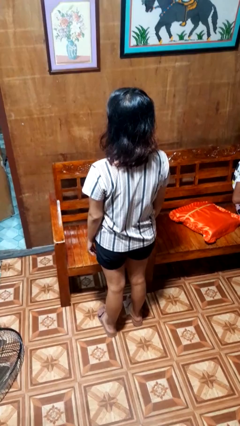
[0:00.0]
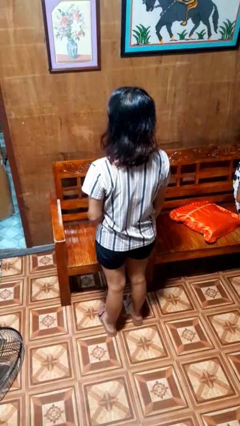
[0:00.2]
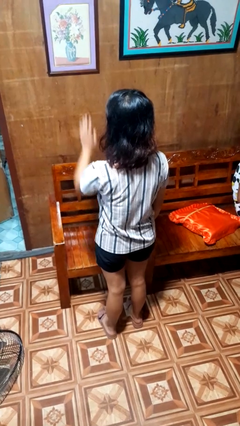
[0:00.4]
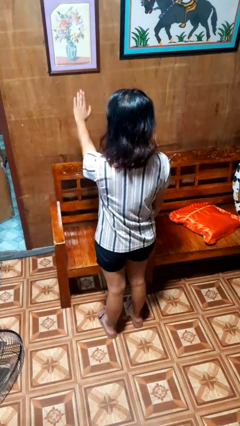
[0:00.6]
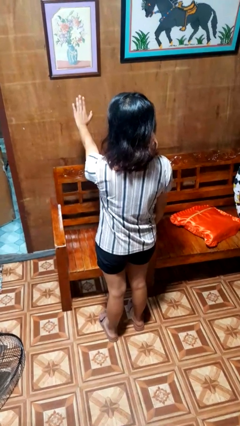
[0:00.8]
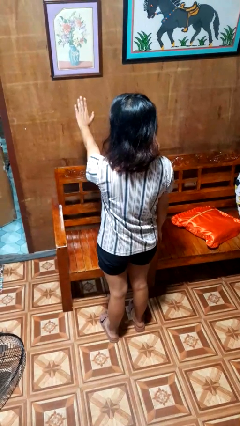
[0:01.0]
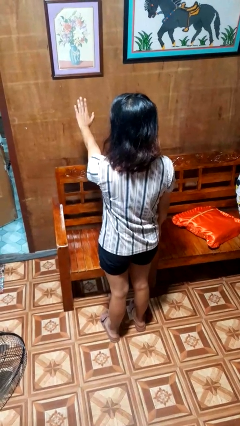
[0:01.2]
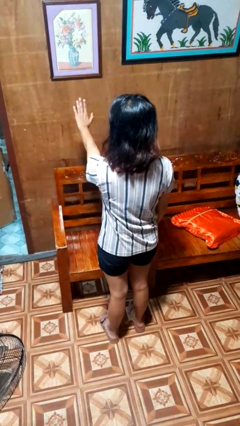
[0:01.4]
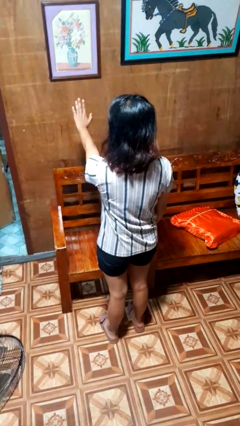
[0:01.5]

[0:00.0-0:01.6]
person gestures stop

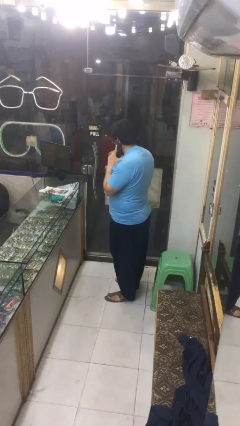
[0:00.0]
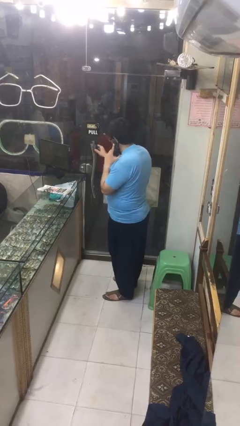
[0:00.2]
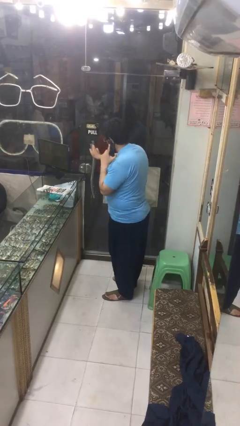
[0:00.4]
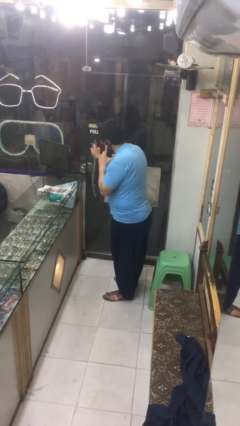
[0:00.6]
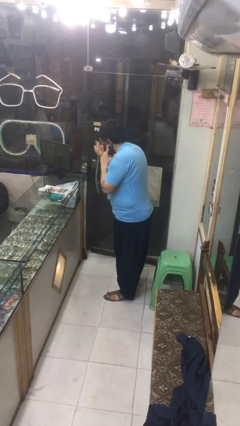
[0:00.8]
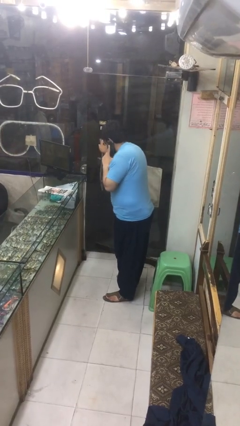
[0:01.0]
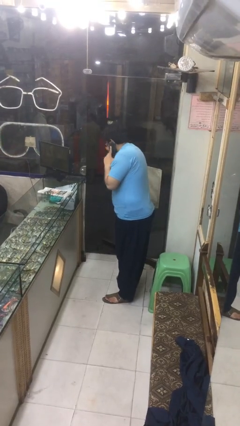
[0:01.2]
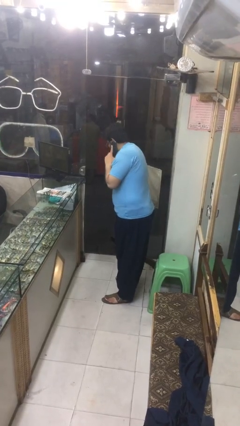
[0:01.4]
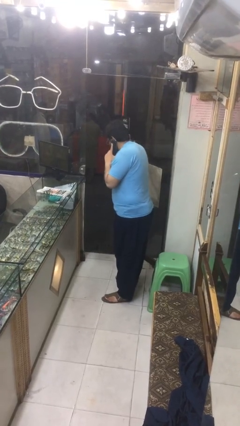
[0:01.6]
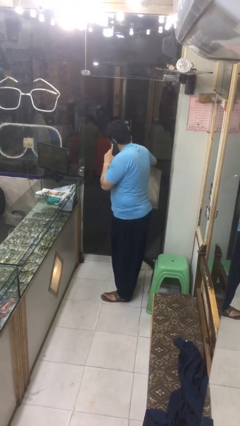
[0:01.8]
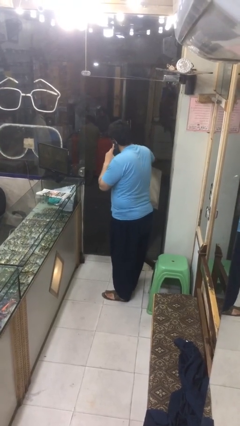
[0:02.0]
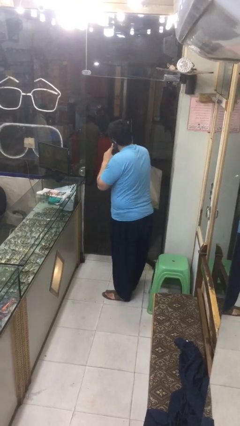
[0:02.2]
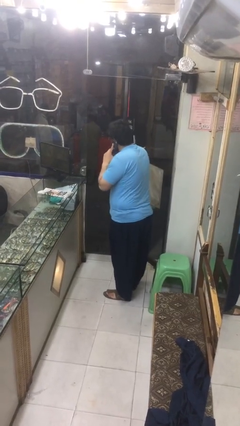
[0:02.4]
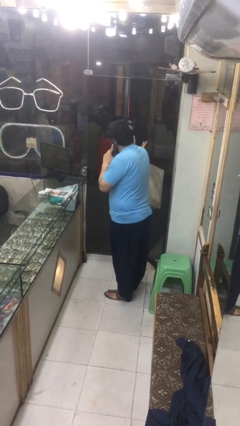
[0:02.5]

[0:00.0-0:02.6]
person opens facility door

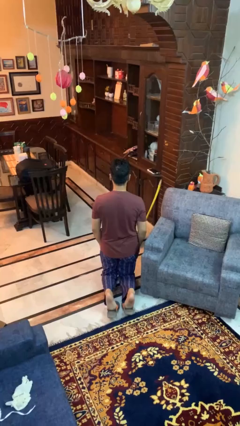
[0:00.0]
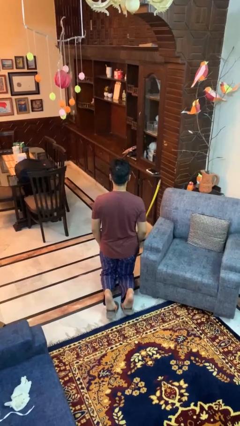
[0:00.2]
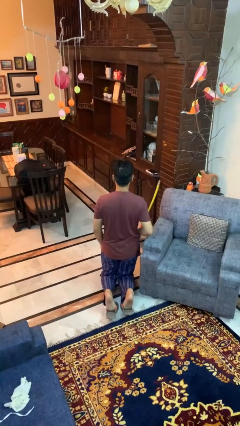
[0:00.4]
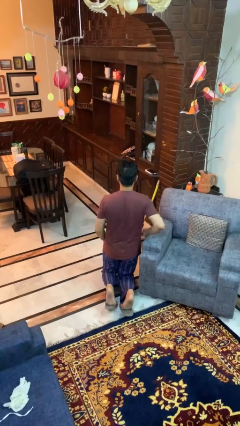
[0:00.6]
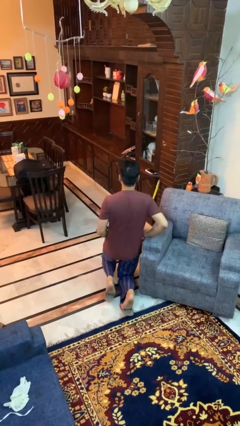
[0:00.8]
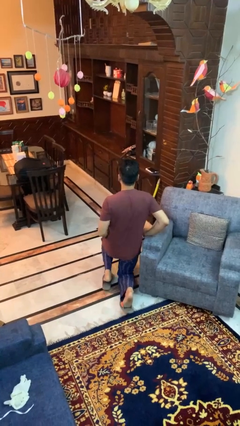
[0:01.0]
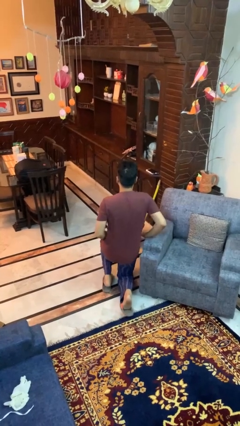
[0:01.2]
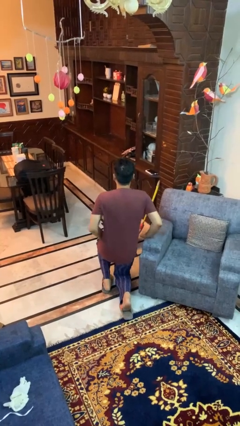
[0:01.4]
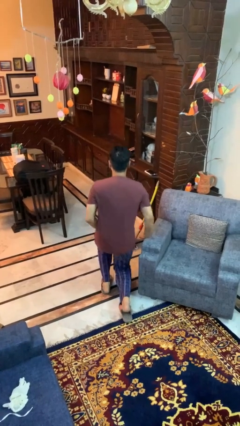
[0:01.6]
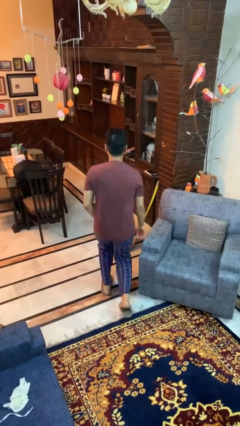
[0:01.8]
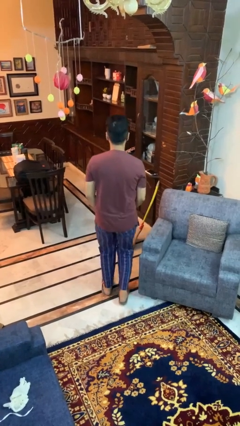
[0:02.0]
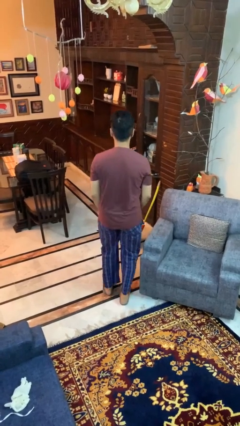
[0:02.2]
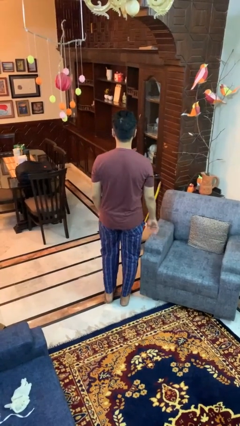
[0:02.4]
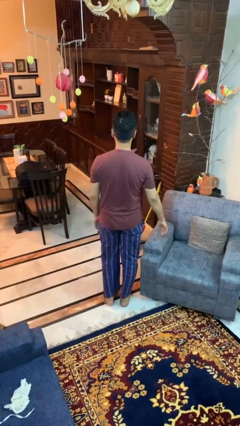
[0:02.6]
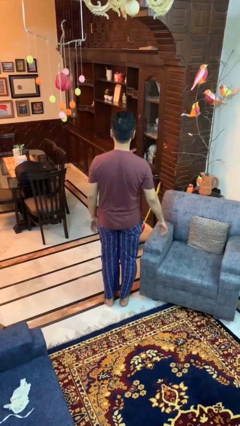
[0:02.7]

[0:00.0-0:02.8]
person stands up from floor

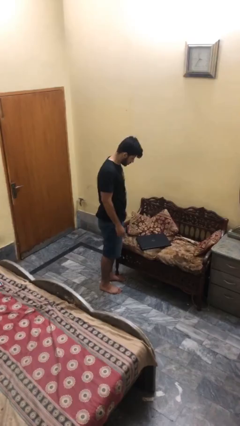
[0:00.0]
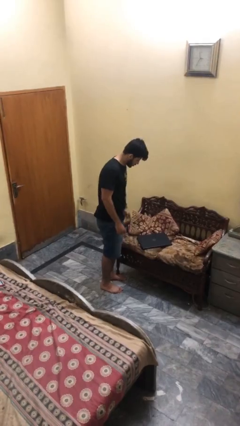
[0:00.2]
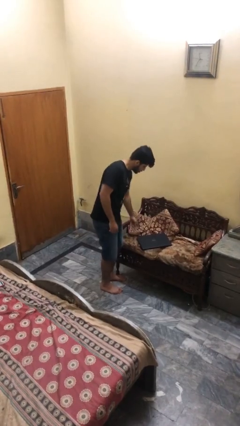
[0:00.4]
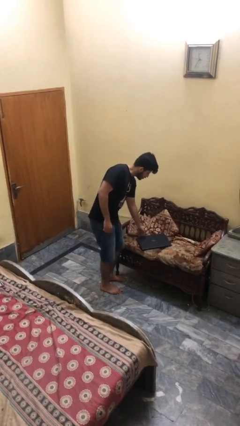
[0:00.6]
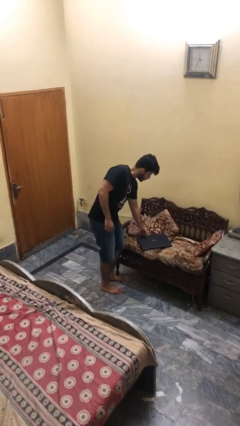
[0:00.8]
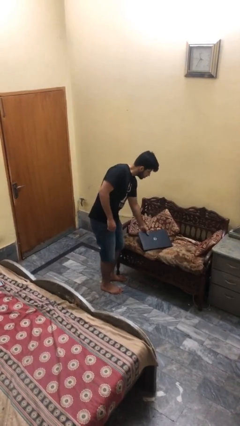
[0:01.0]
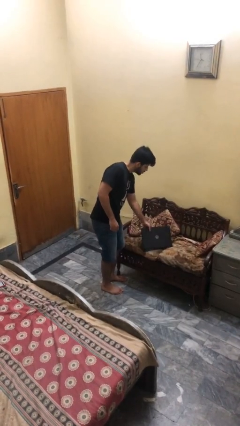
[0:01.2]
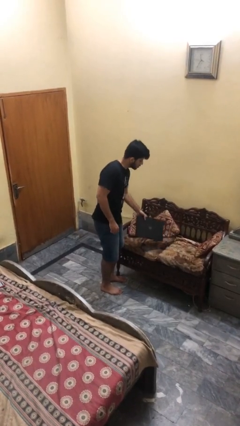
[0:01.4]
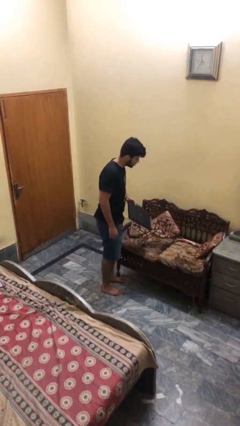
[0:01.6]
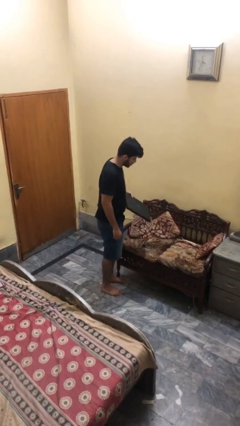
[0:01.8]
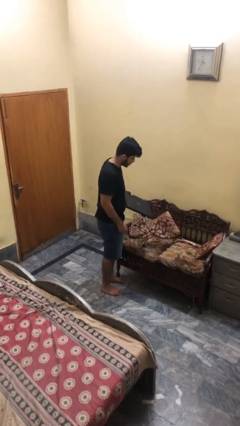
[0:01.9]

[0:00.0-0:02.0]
person picks up object from couch

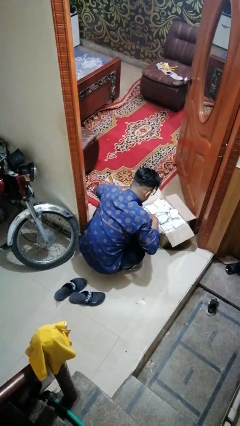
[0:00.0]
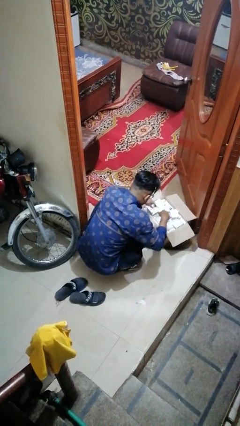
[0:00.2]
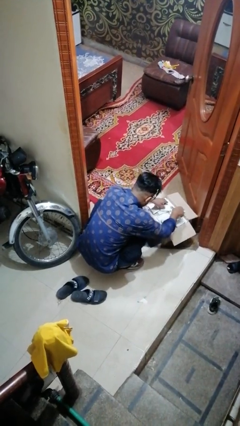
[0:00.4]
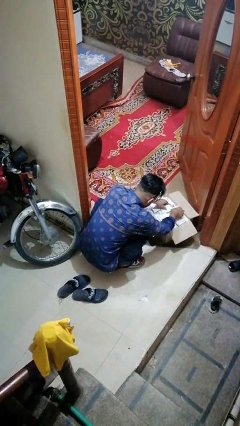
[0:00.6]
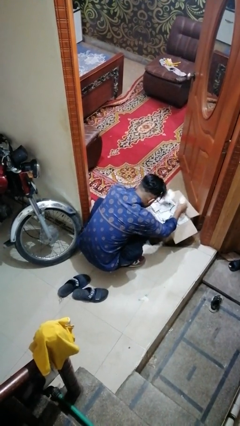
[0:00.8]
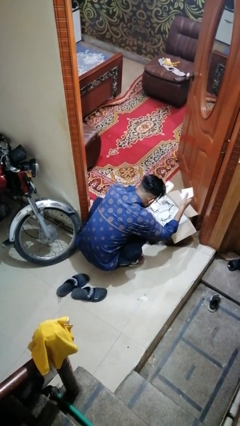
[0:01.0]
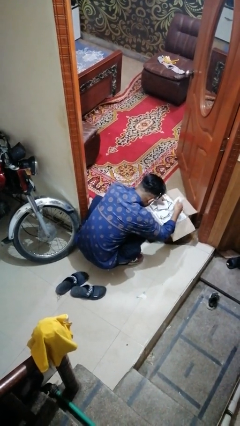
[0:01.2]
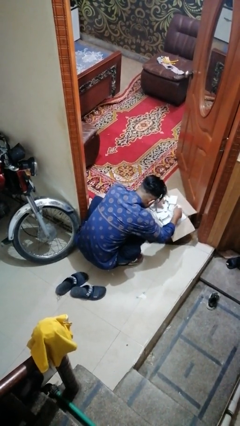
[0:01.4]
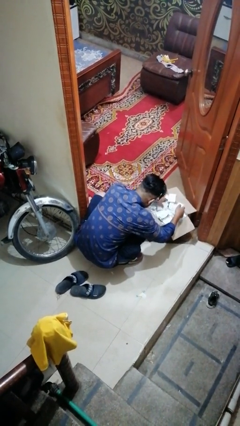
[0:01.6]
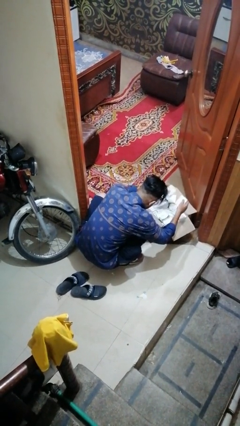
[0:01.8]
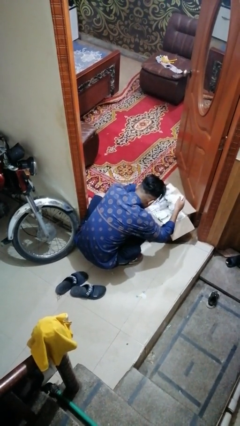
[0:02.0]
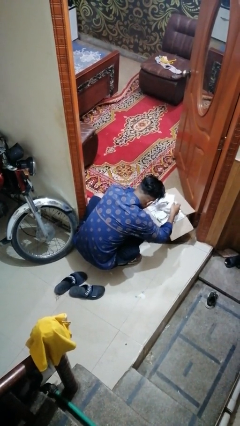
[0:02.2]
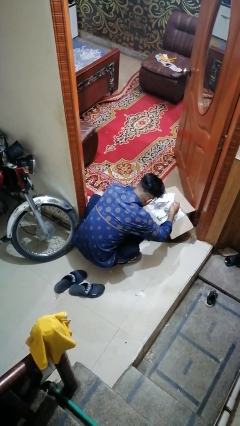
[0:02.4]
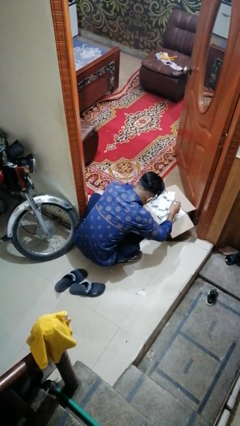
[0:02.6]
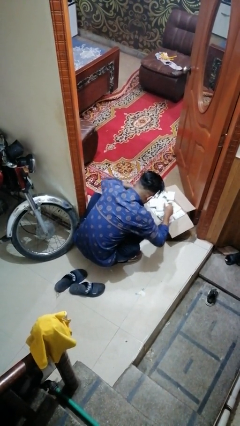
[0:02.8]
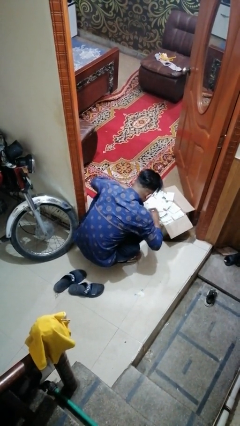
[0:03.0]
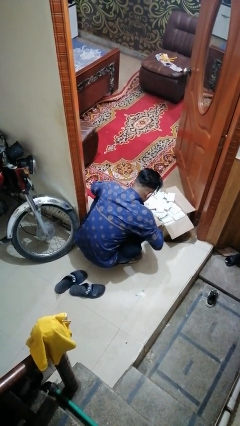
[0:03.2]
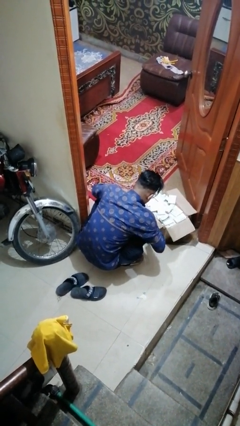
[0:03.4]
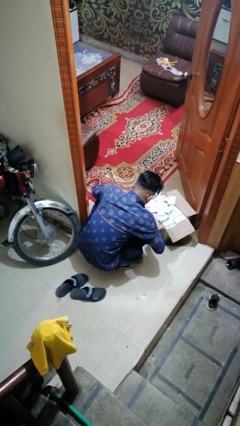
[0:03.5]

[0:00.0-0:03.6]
person searches in box

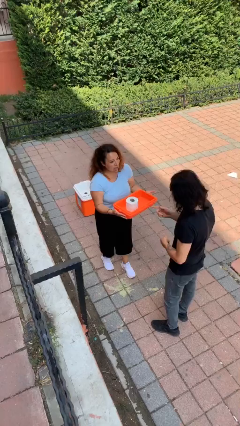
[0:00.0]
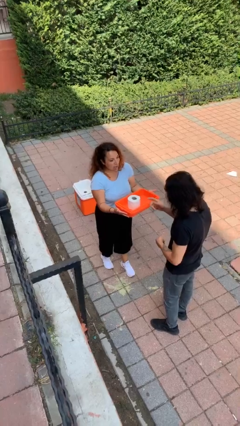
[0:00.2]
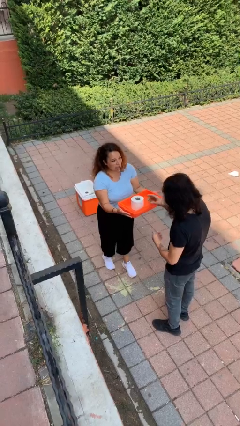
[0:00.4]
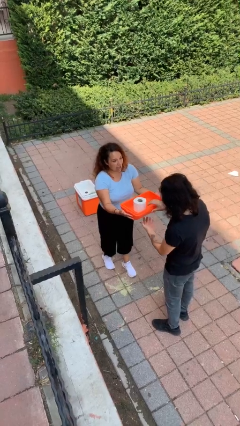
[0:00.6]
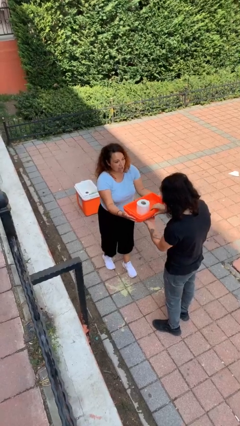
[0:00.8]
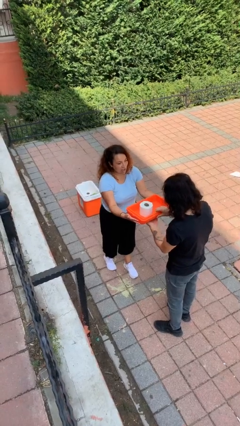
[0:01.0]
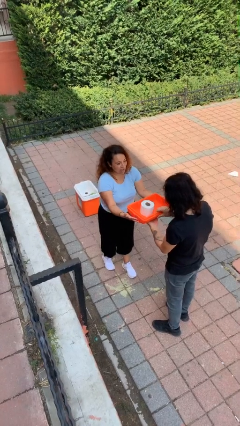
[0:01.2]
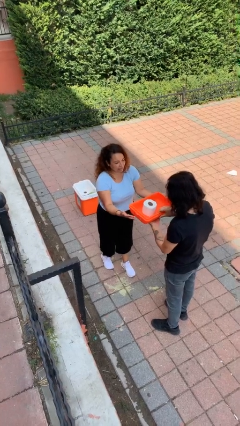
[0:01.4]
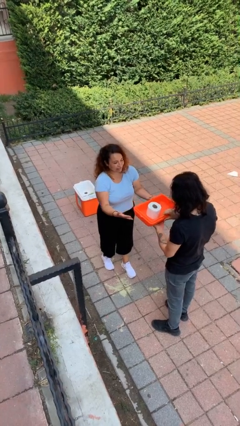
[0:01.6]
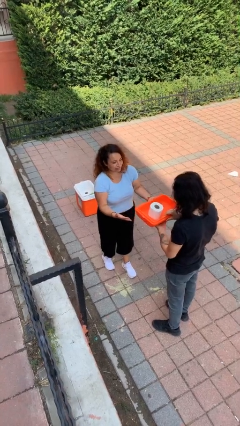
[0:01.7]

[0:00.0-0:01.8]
person transfers object to person

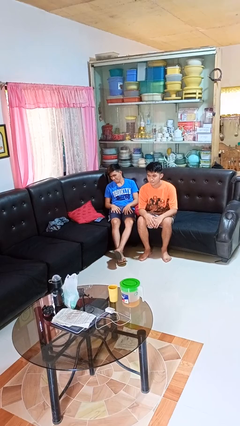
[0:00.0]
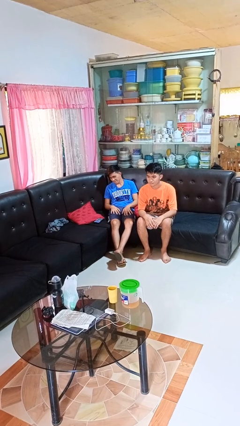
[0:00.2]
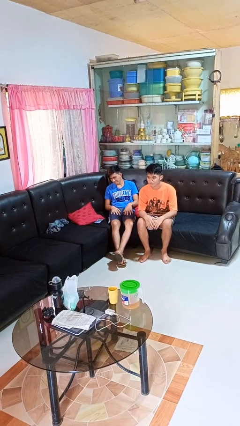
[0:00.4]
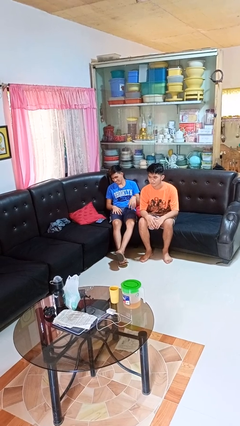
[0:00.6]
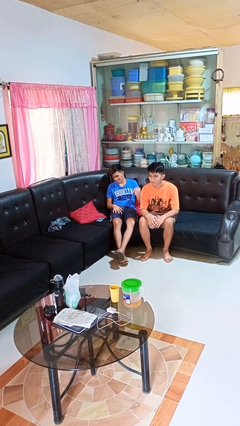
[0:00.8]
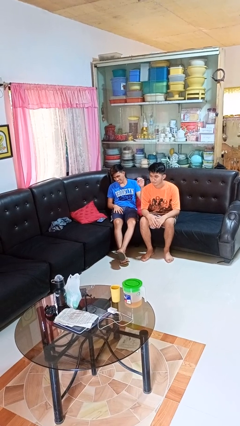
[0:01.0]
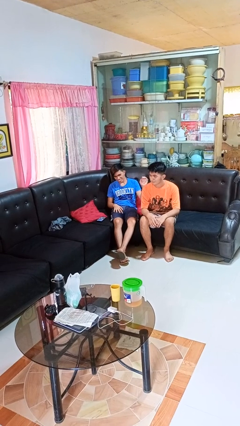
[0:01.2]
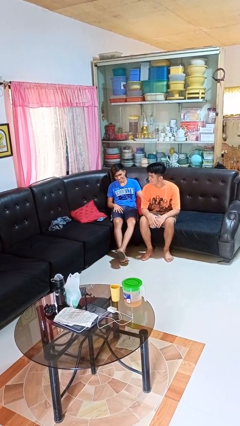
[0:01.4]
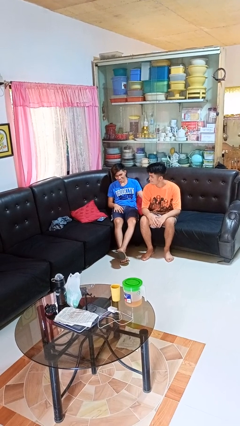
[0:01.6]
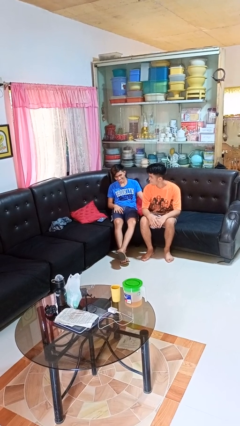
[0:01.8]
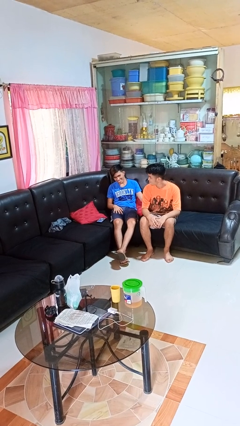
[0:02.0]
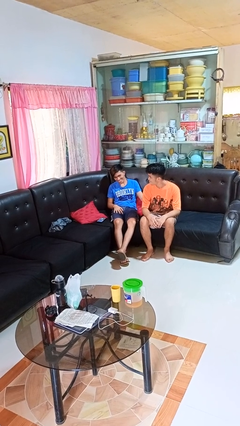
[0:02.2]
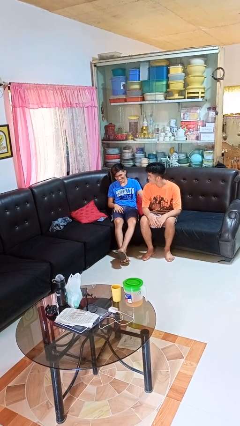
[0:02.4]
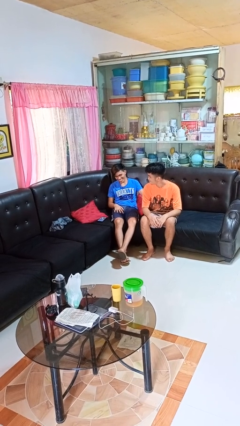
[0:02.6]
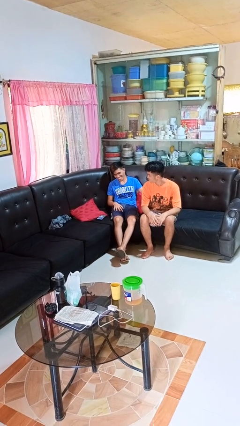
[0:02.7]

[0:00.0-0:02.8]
person touches back of person
